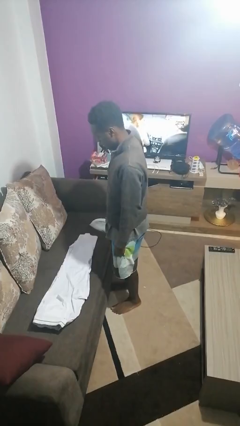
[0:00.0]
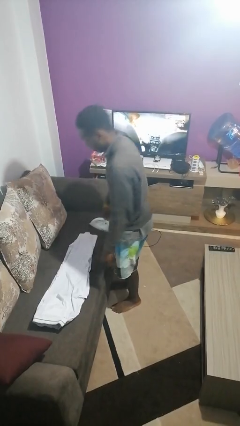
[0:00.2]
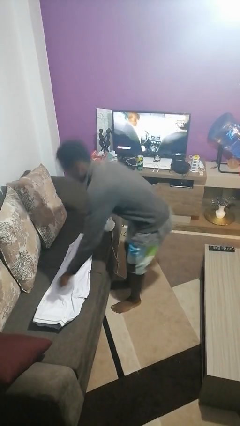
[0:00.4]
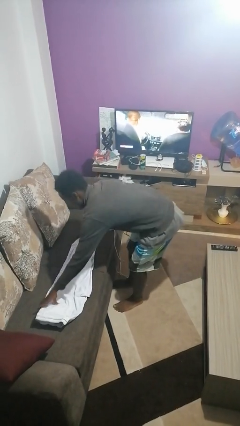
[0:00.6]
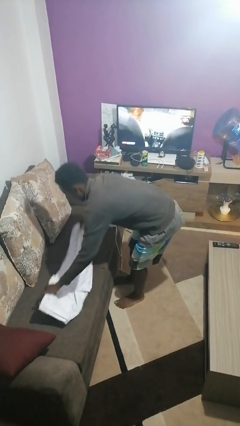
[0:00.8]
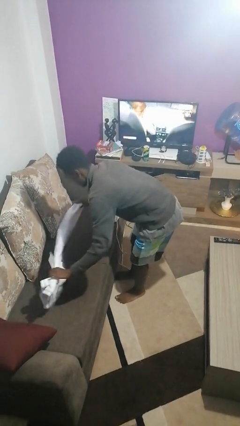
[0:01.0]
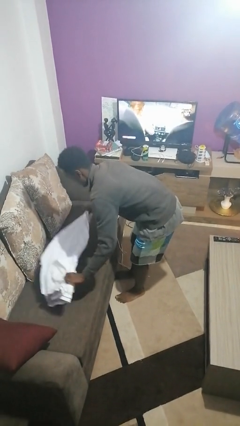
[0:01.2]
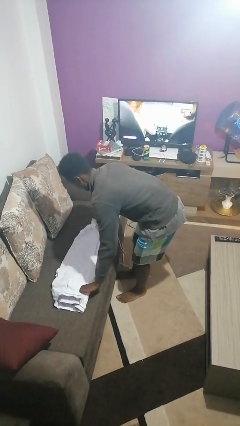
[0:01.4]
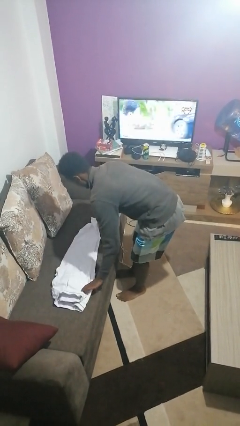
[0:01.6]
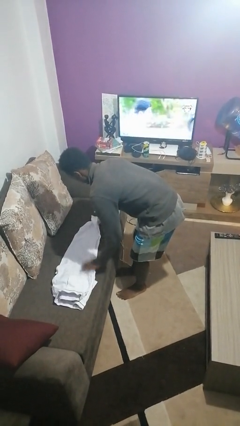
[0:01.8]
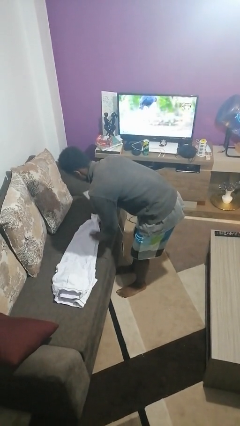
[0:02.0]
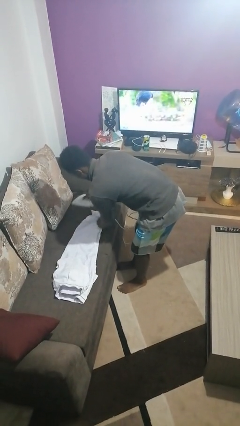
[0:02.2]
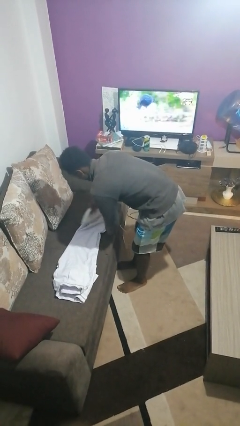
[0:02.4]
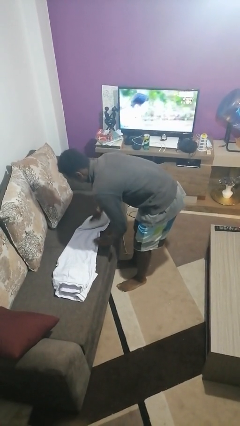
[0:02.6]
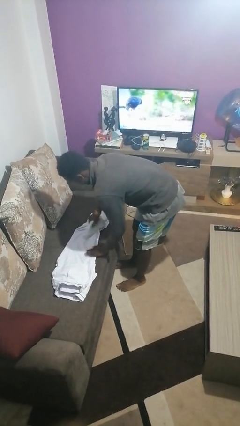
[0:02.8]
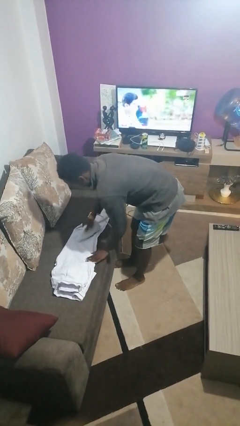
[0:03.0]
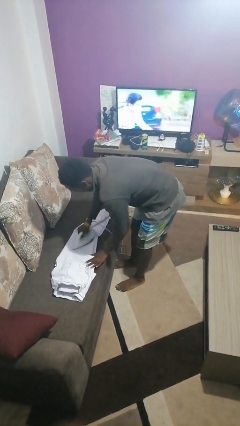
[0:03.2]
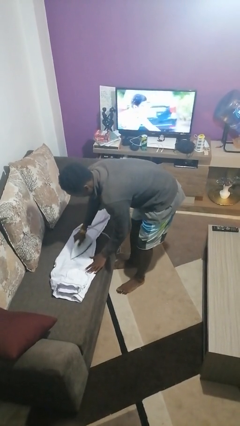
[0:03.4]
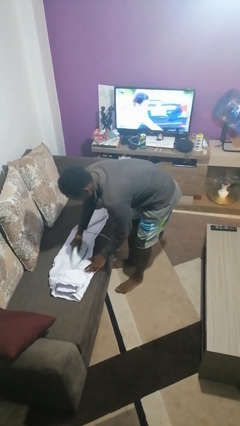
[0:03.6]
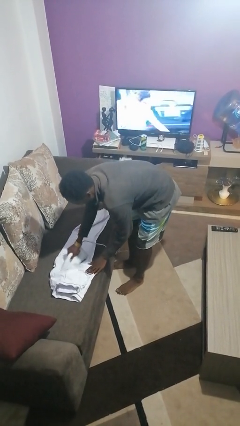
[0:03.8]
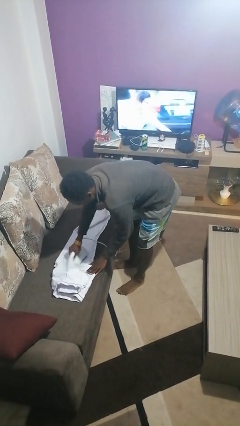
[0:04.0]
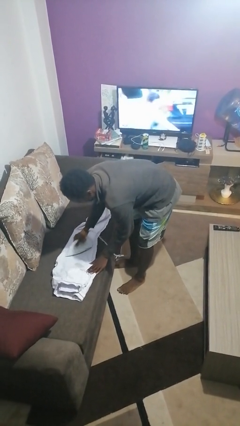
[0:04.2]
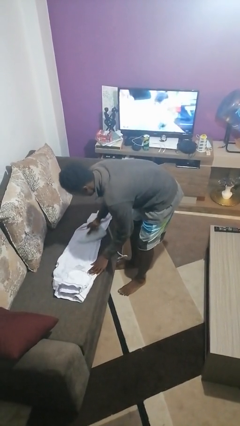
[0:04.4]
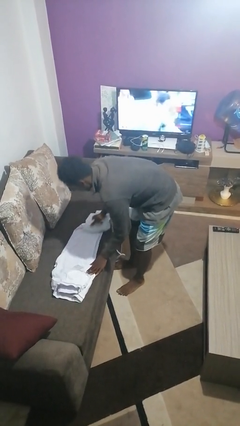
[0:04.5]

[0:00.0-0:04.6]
person irons clothes

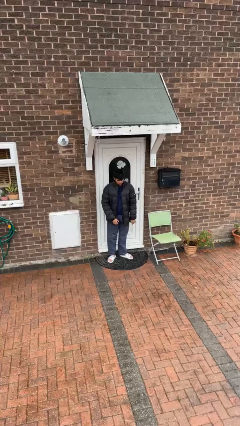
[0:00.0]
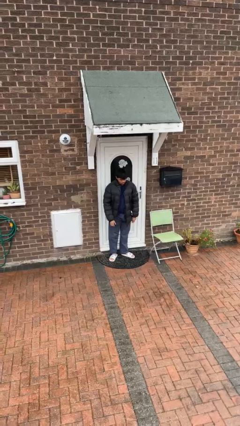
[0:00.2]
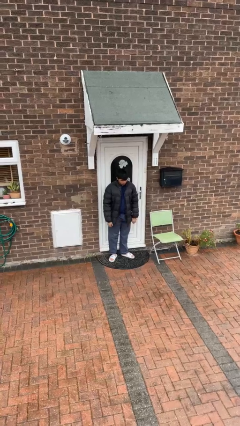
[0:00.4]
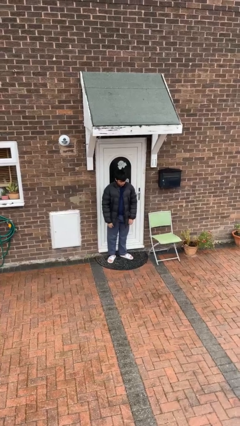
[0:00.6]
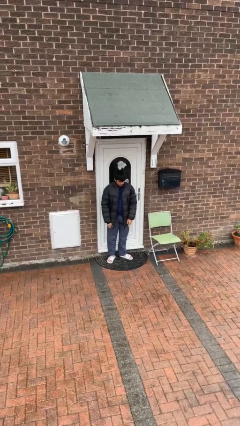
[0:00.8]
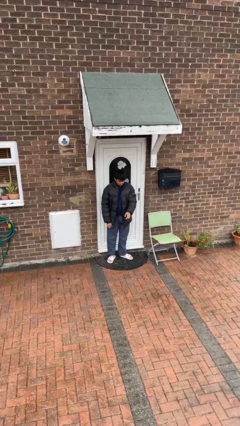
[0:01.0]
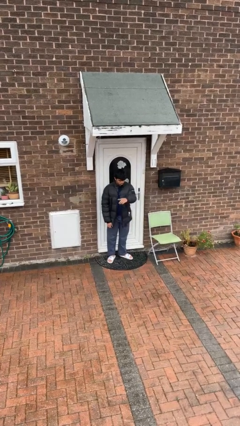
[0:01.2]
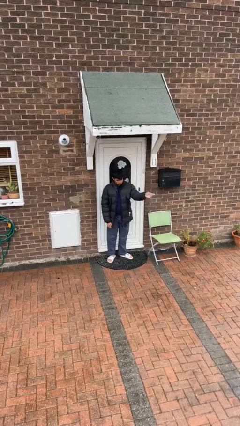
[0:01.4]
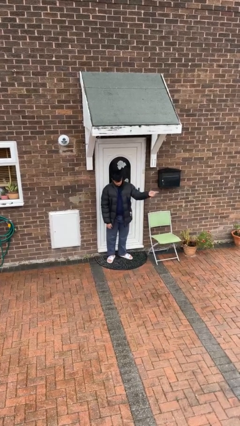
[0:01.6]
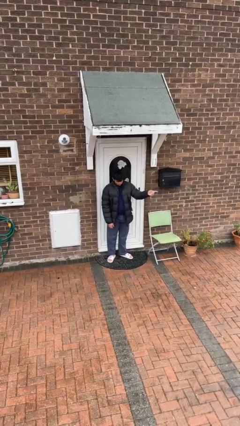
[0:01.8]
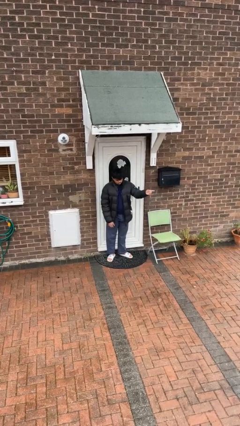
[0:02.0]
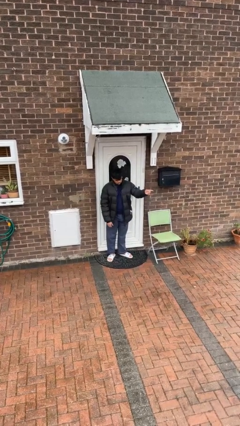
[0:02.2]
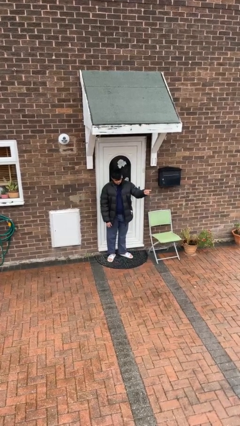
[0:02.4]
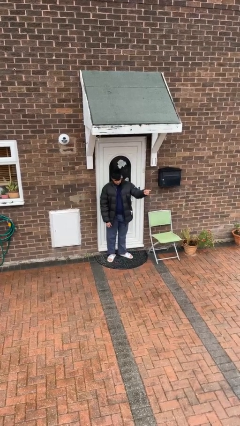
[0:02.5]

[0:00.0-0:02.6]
person gestures swipe left

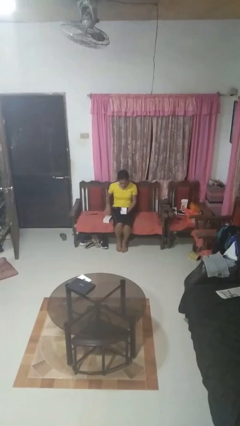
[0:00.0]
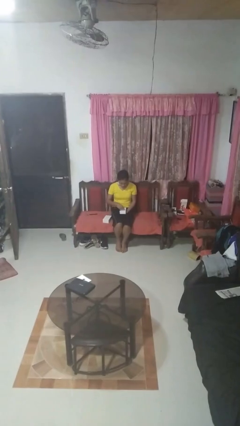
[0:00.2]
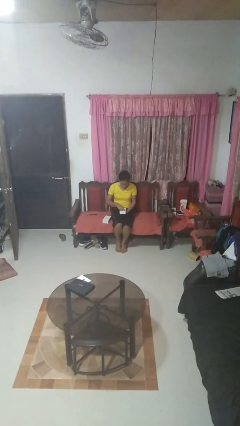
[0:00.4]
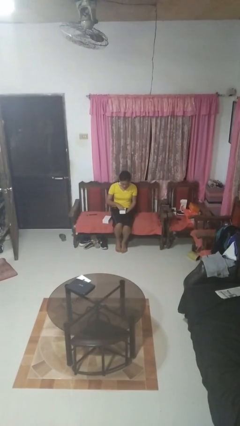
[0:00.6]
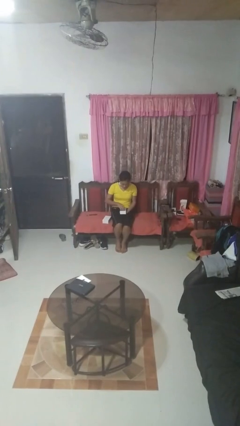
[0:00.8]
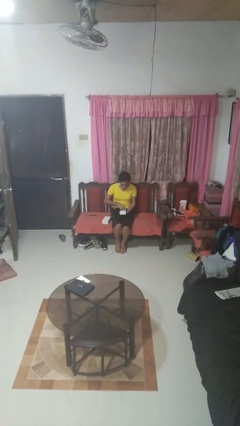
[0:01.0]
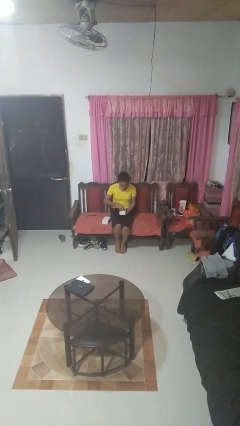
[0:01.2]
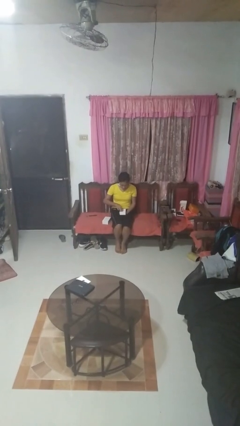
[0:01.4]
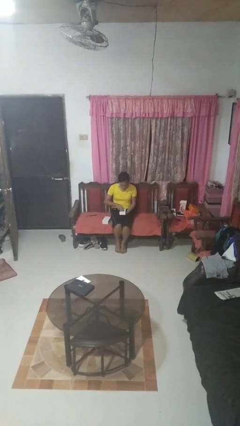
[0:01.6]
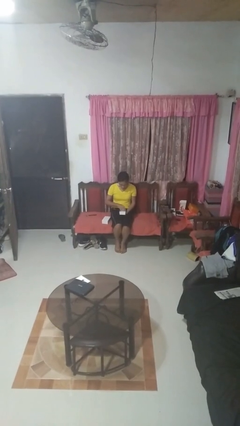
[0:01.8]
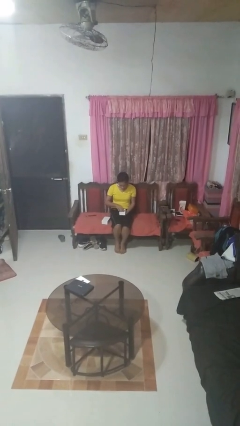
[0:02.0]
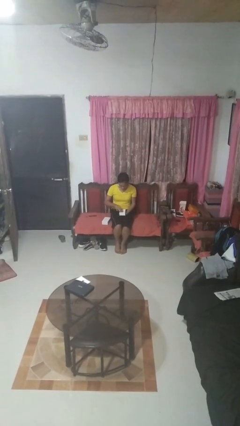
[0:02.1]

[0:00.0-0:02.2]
person searches jewelry box

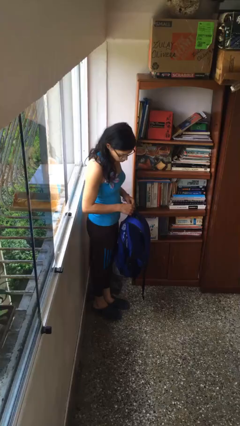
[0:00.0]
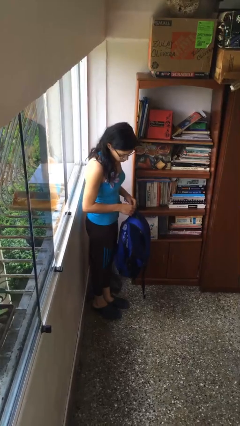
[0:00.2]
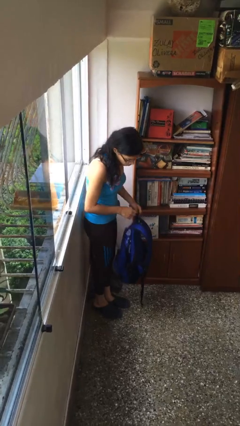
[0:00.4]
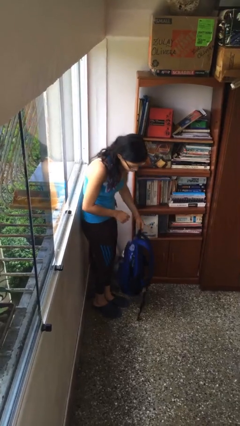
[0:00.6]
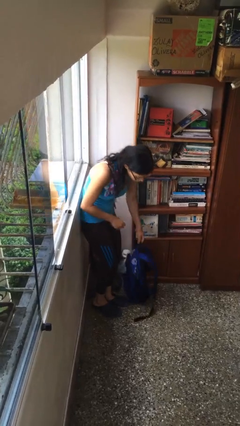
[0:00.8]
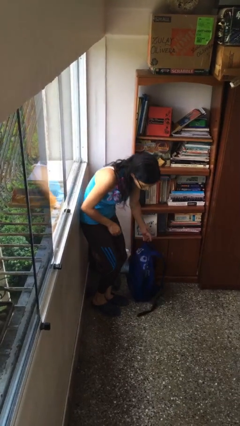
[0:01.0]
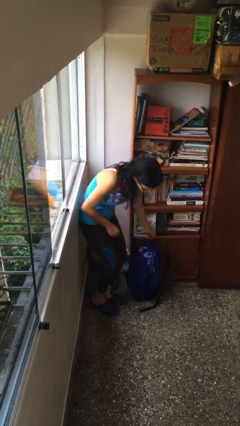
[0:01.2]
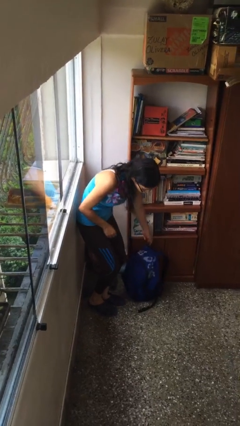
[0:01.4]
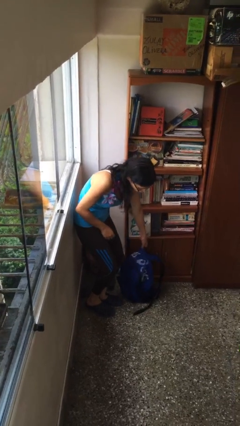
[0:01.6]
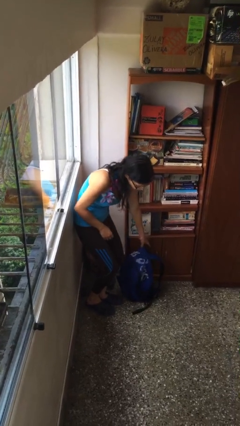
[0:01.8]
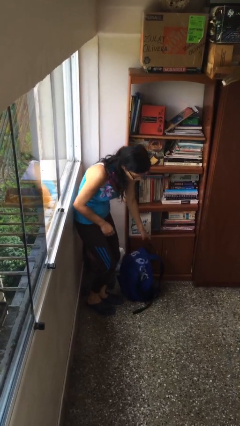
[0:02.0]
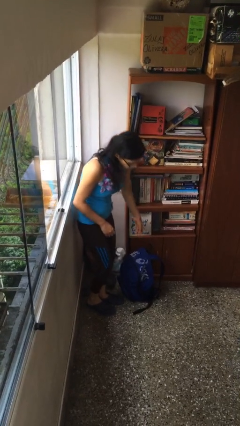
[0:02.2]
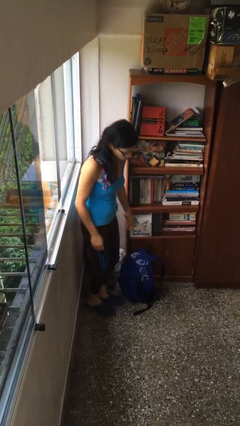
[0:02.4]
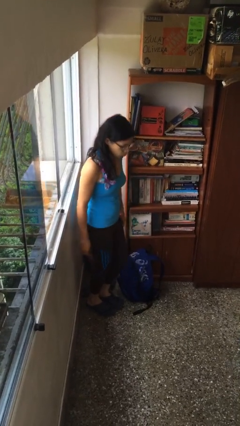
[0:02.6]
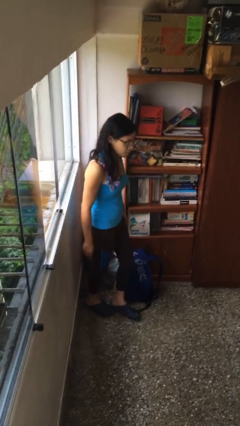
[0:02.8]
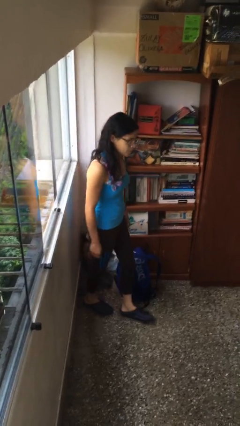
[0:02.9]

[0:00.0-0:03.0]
person puts down object on floor

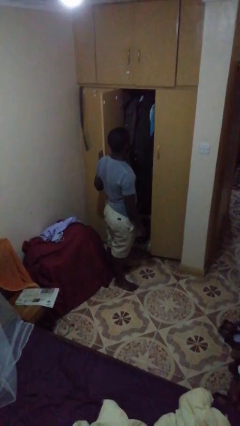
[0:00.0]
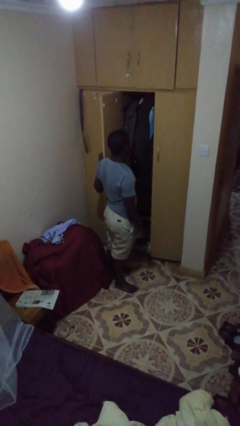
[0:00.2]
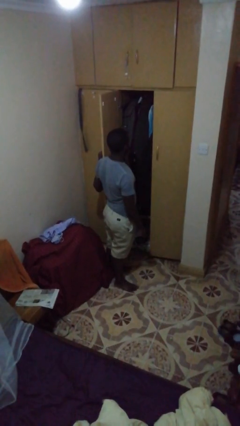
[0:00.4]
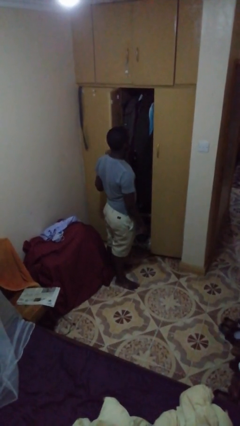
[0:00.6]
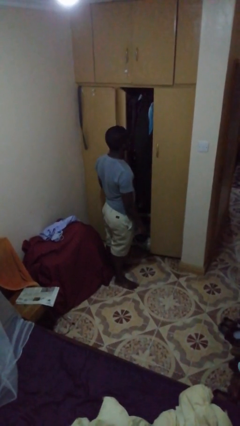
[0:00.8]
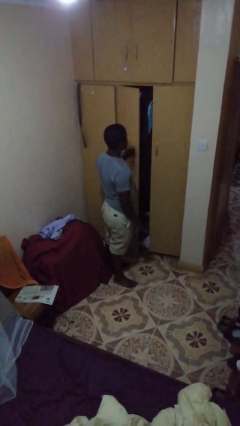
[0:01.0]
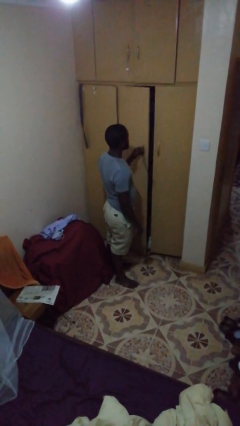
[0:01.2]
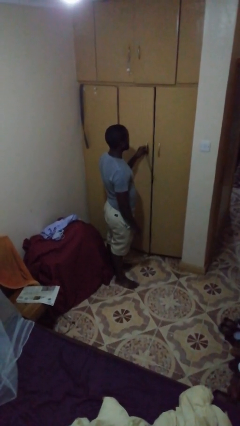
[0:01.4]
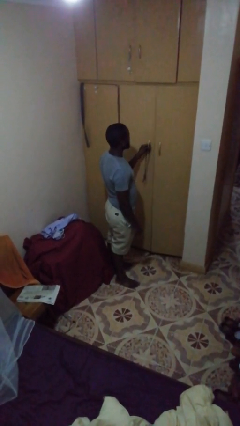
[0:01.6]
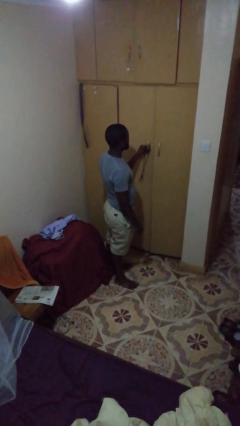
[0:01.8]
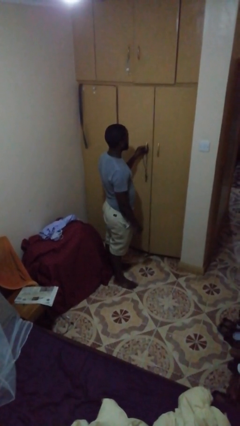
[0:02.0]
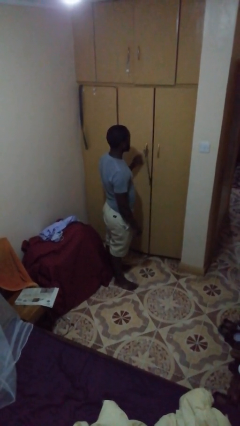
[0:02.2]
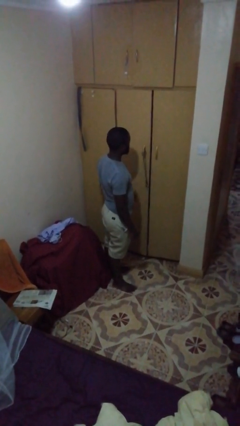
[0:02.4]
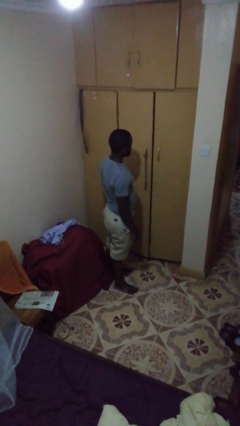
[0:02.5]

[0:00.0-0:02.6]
person closes closet door

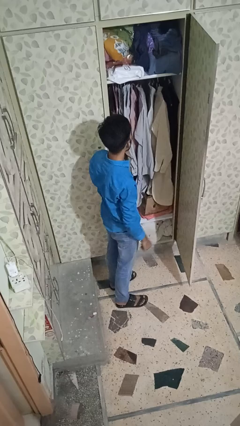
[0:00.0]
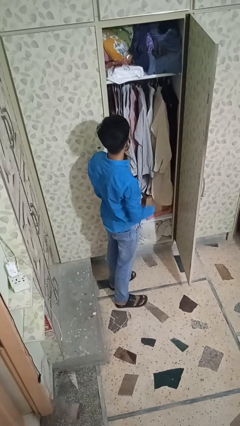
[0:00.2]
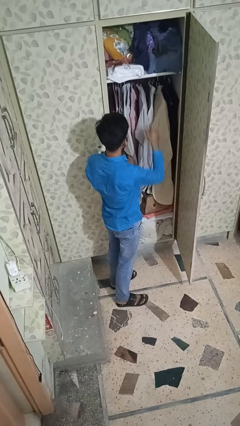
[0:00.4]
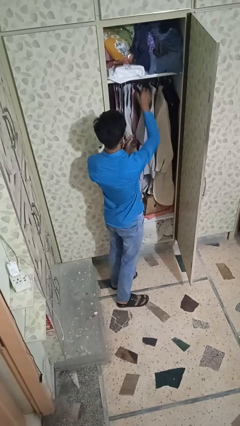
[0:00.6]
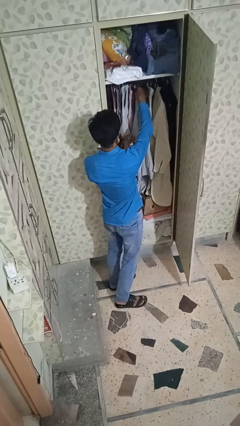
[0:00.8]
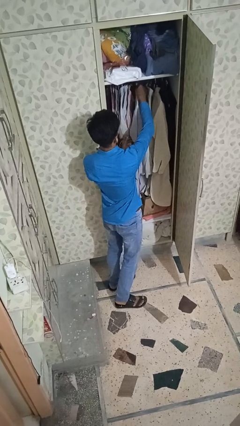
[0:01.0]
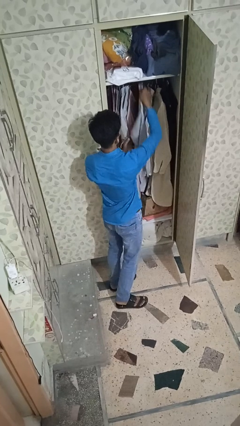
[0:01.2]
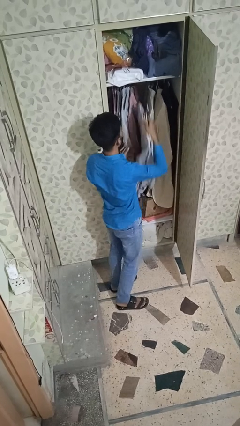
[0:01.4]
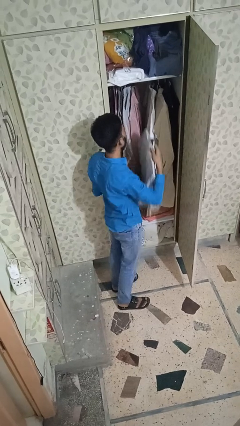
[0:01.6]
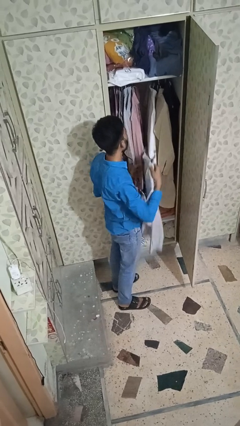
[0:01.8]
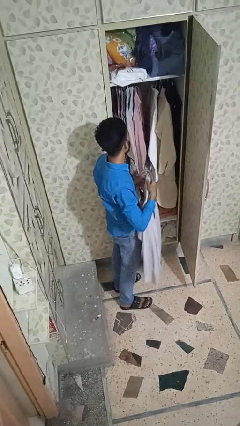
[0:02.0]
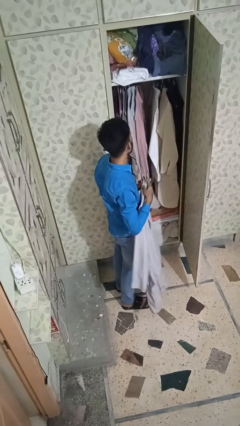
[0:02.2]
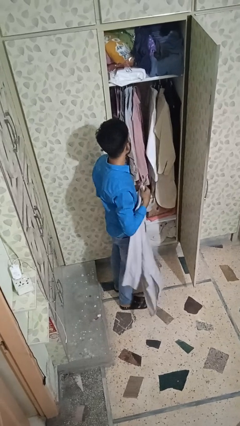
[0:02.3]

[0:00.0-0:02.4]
person takes clothes from closet
